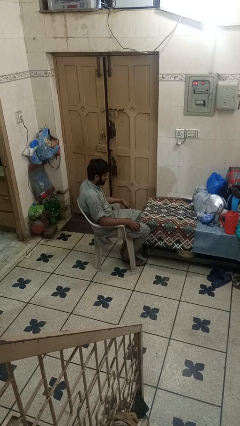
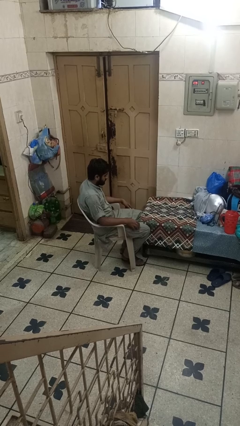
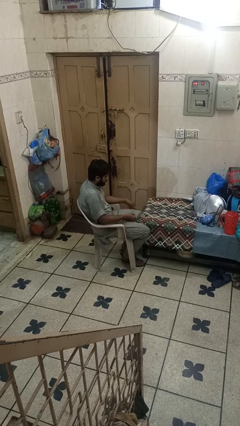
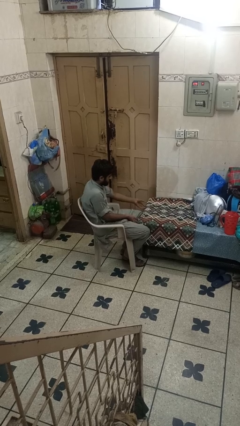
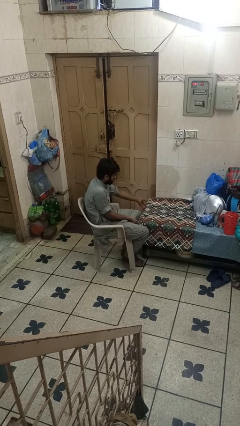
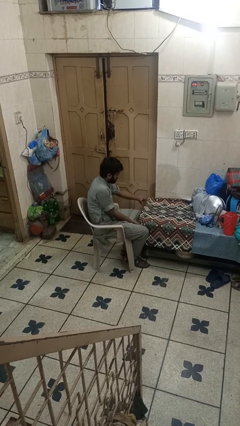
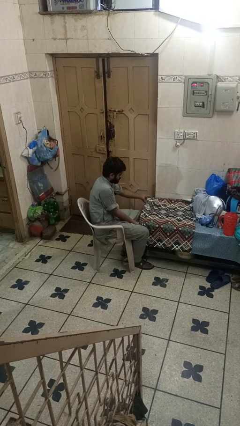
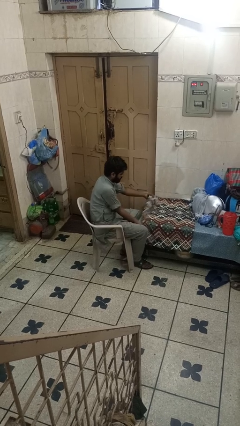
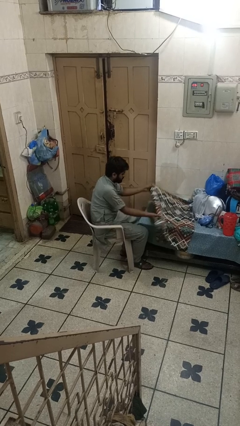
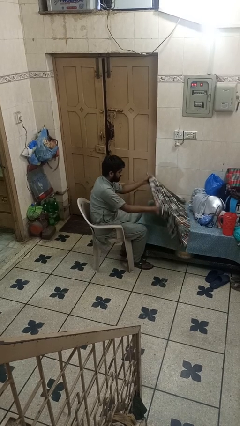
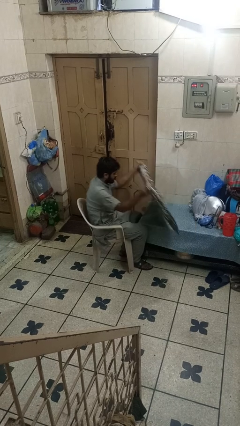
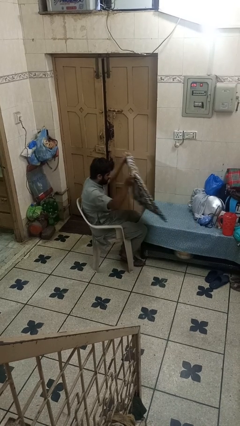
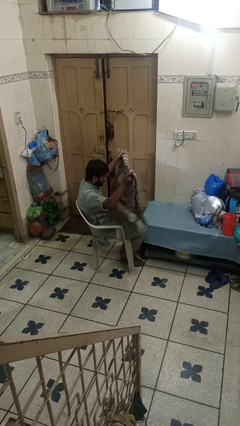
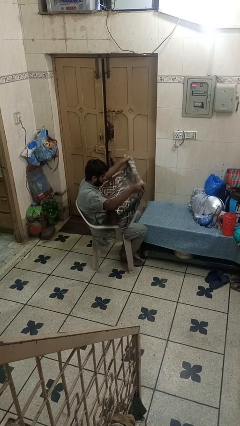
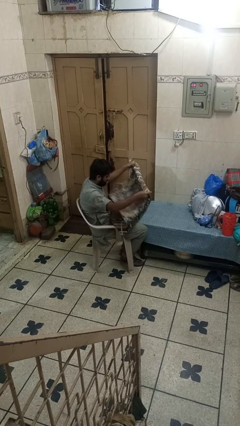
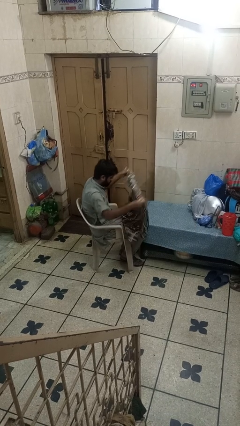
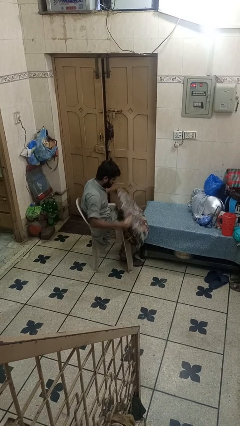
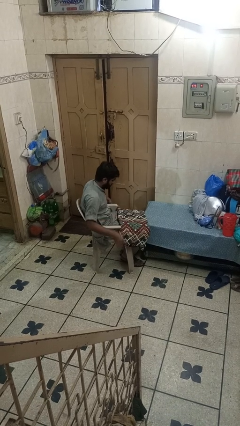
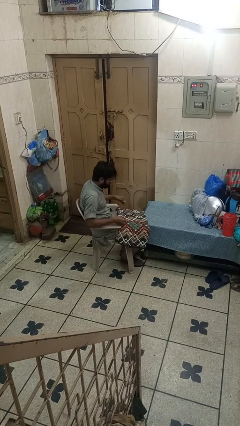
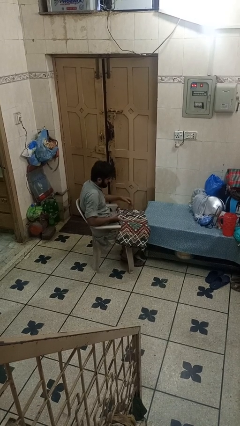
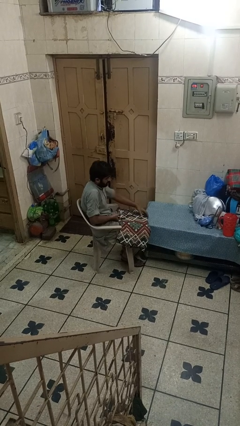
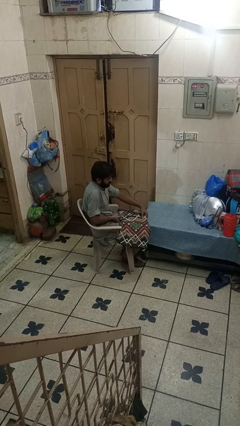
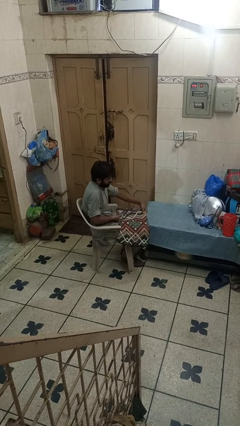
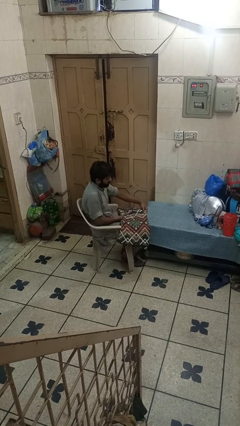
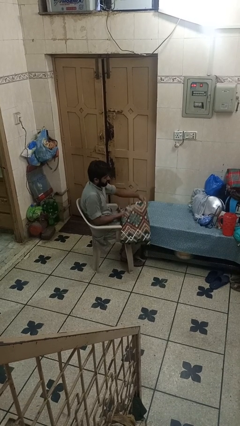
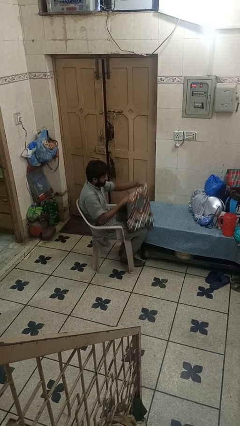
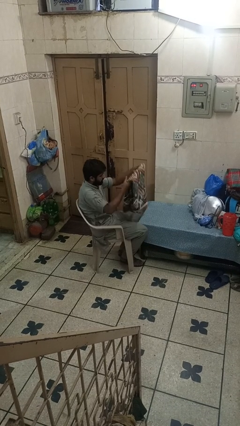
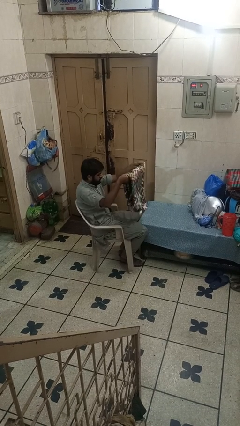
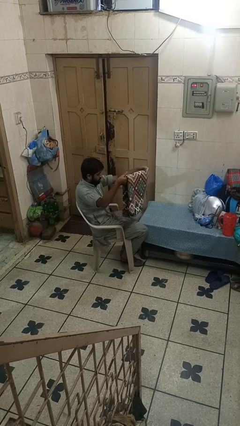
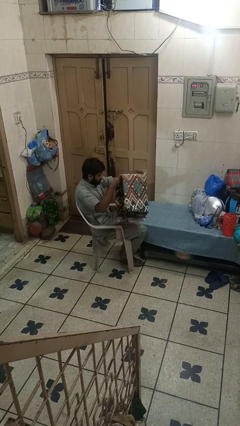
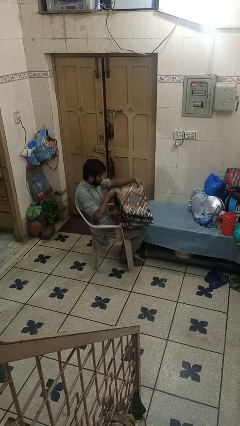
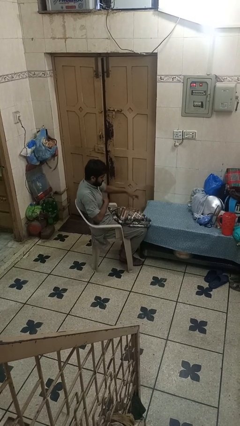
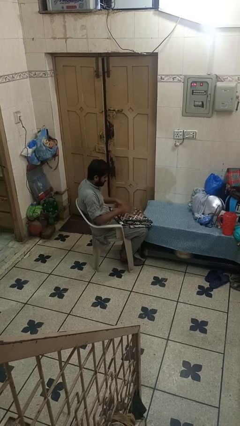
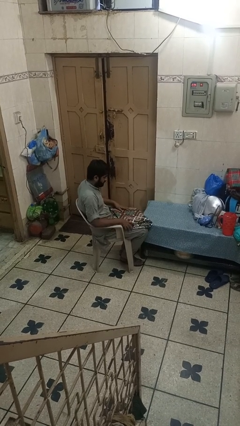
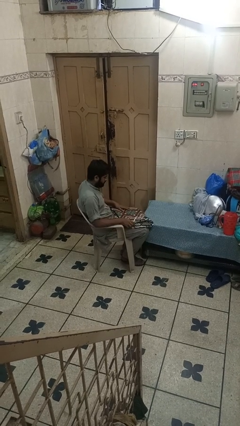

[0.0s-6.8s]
person folds tablecloth

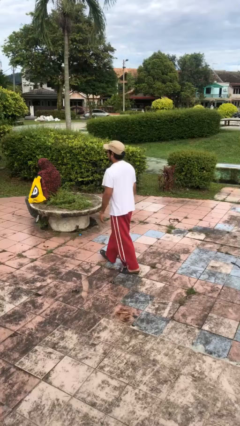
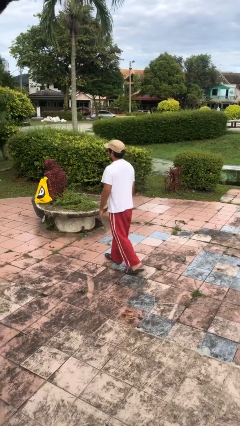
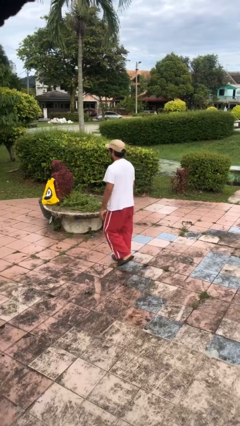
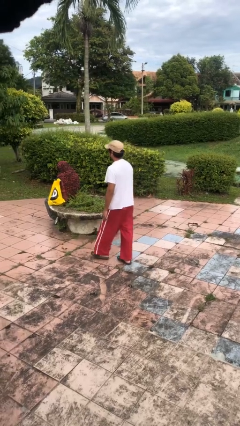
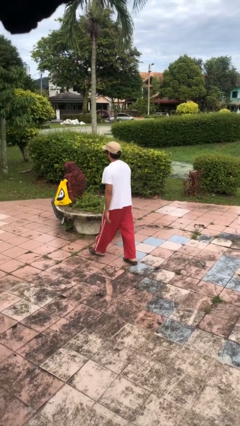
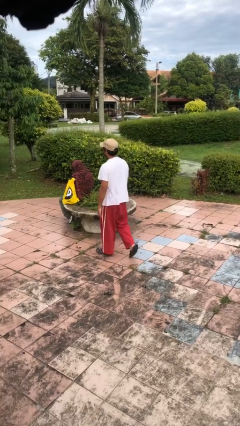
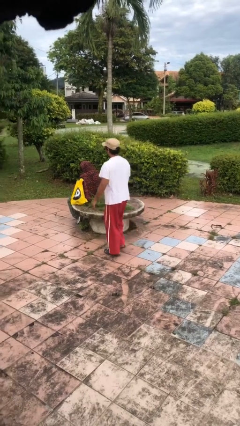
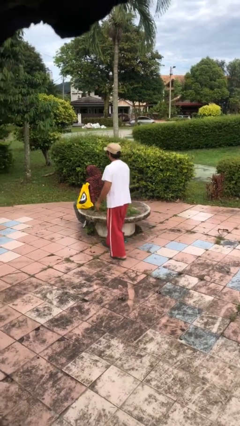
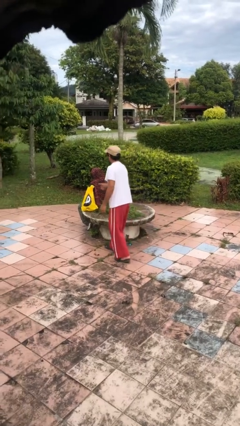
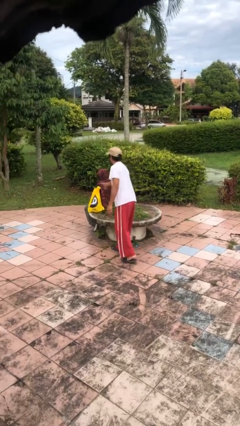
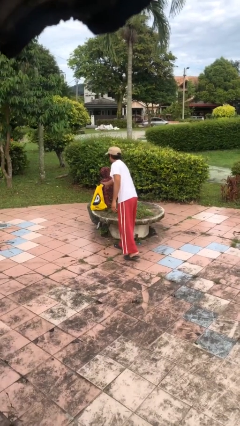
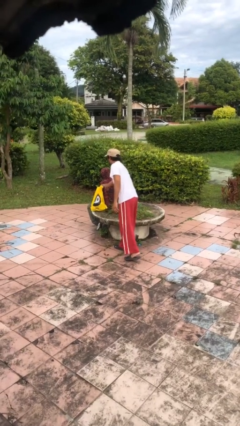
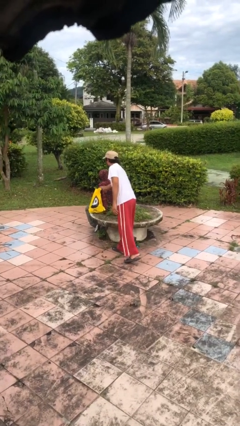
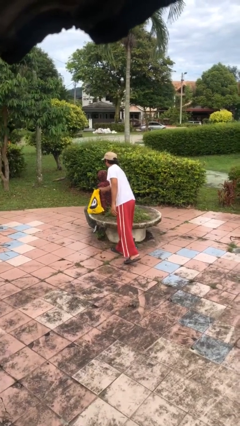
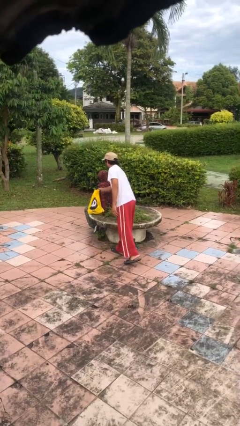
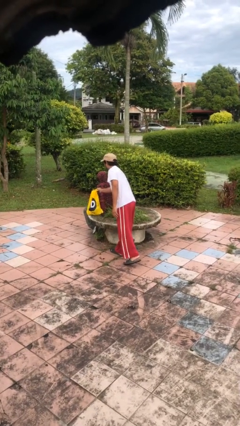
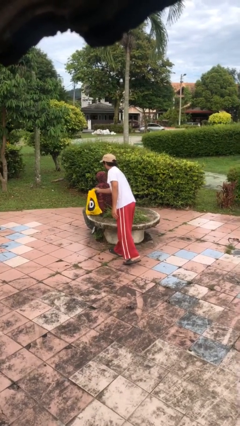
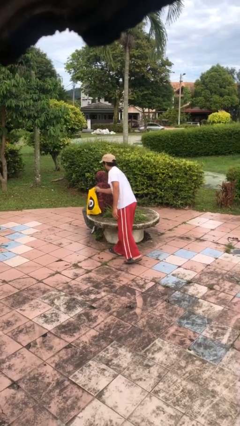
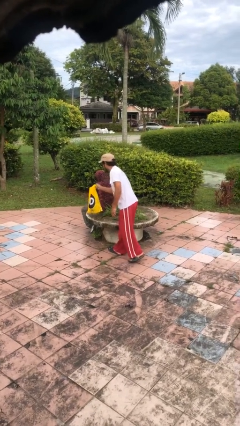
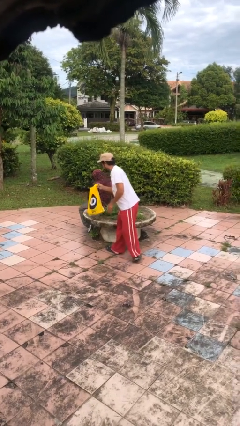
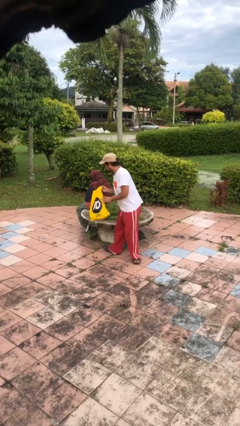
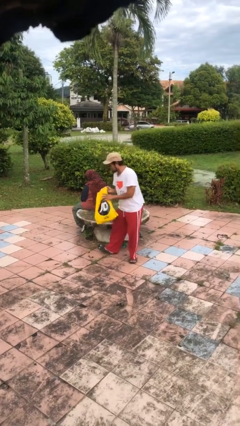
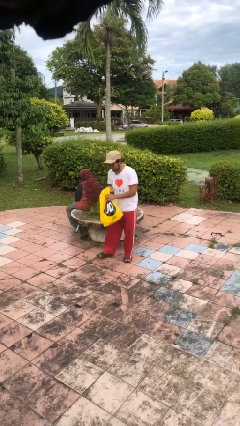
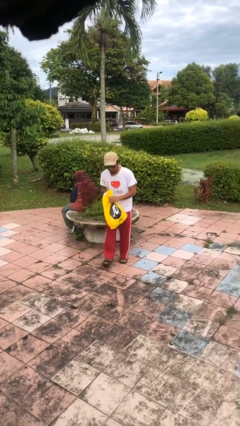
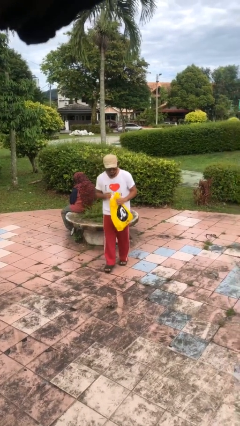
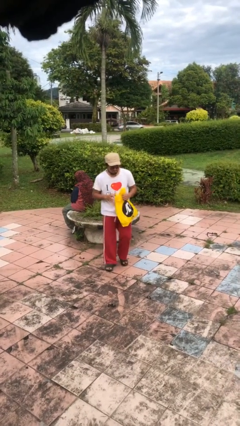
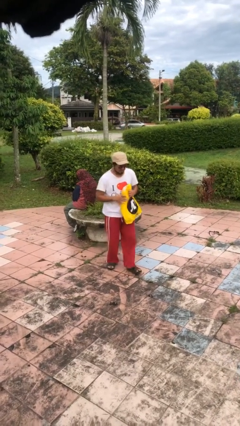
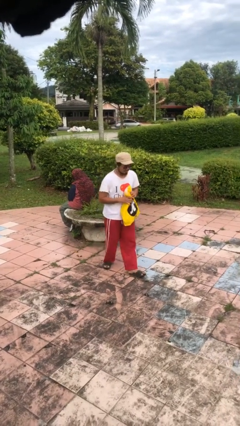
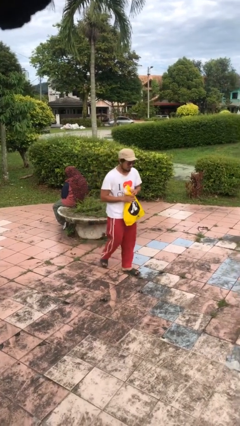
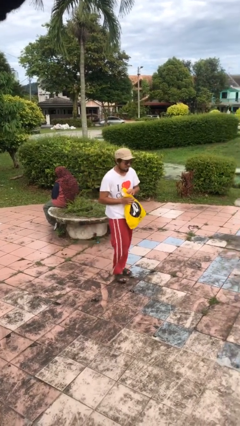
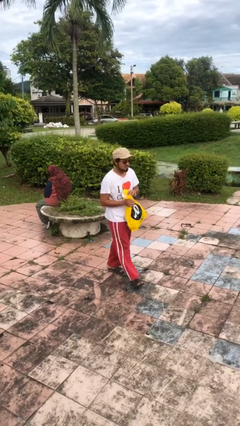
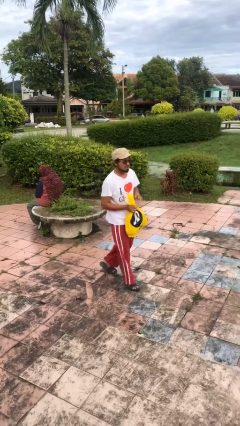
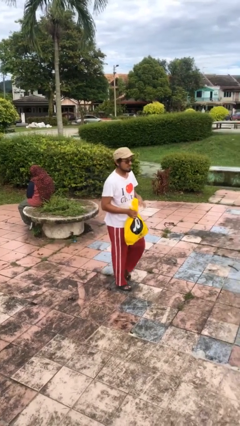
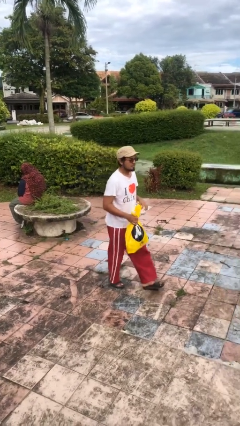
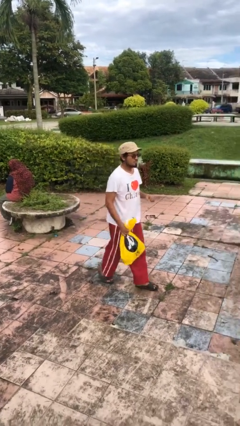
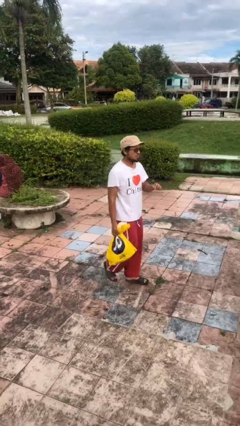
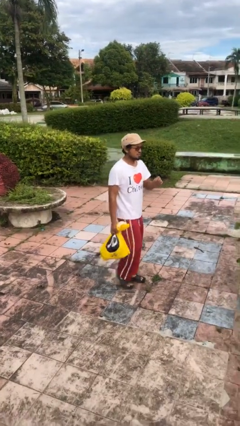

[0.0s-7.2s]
person steals object from person

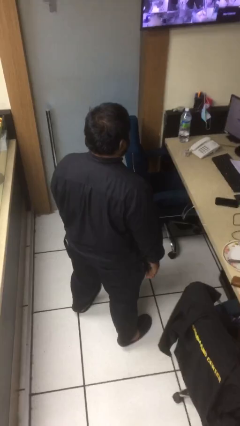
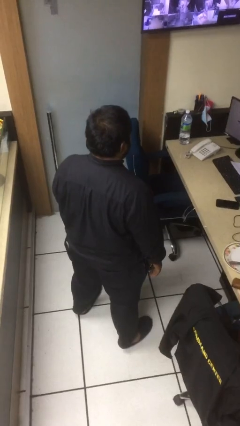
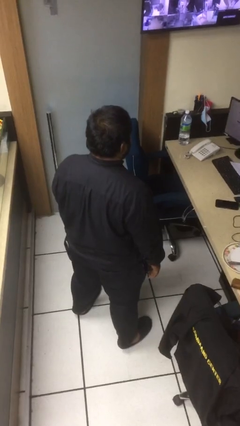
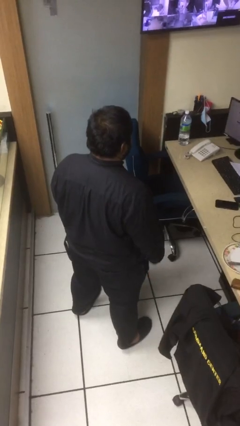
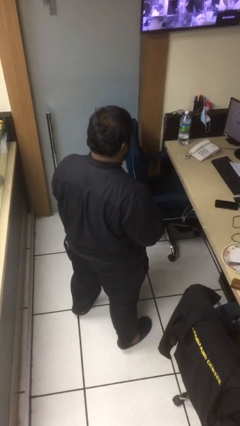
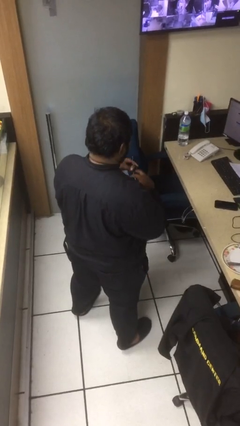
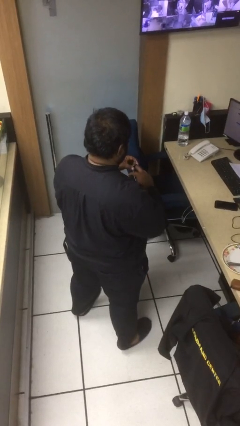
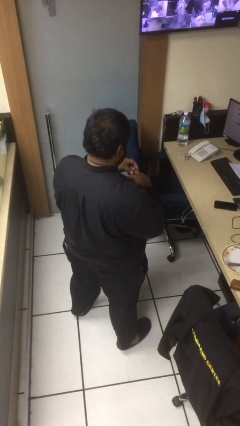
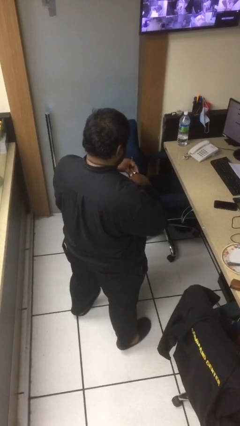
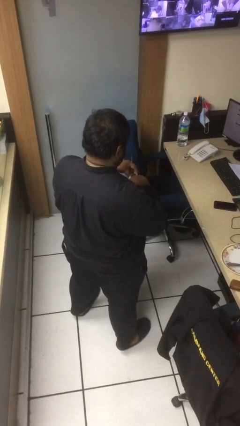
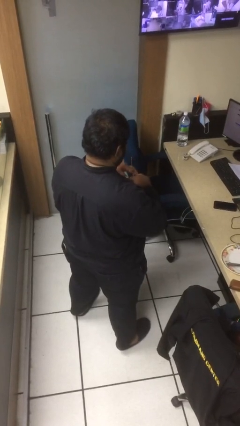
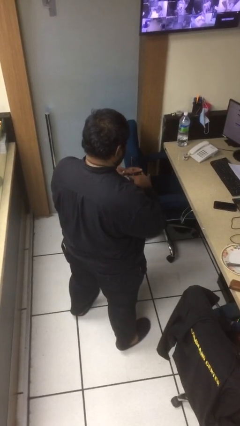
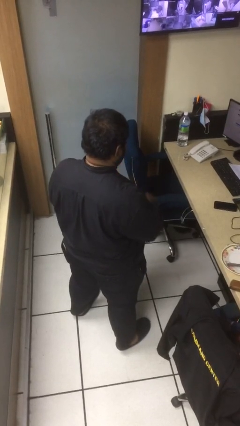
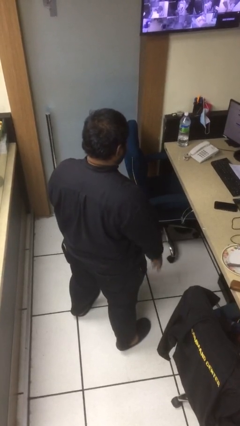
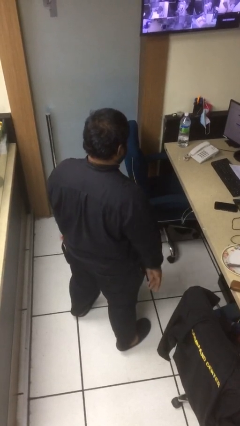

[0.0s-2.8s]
person puts on ring

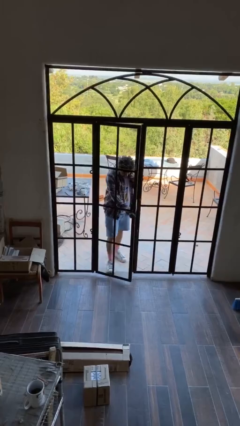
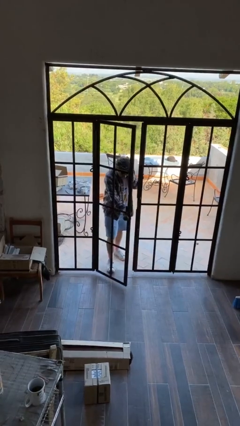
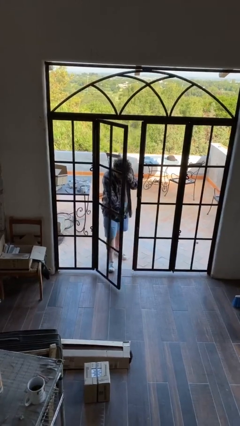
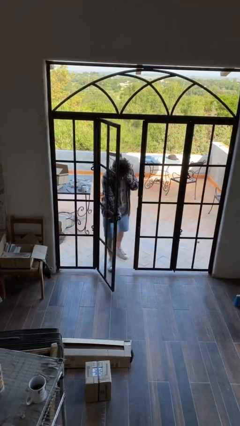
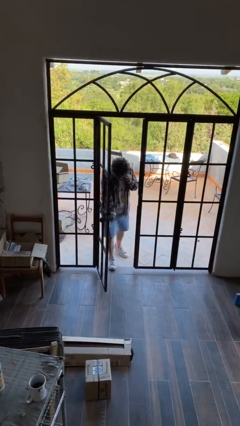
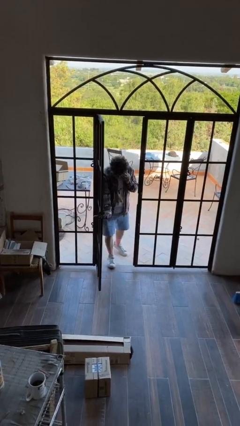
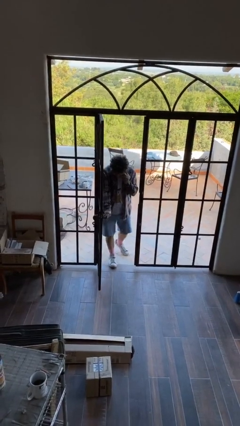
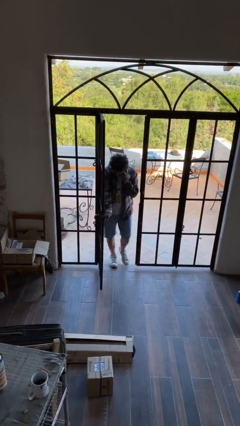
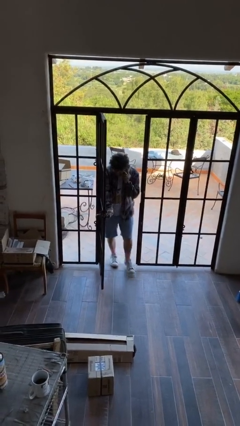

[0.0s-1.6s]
person opens facility door
